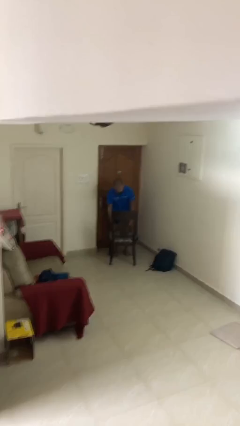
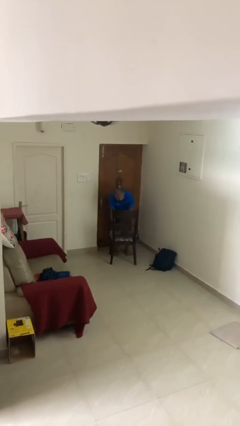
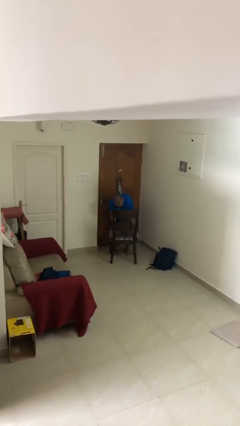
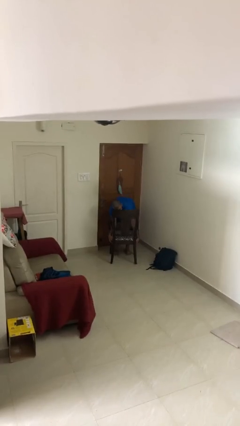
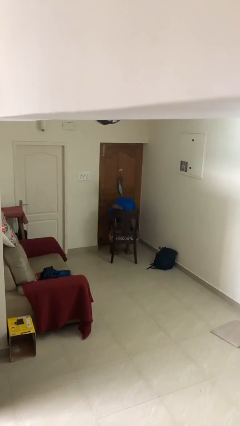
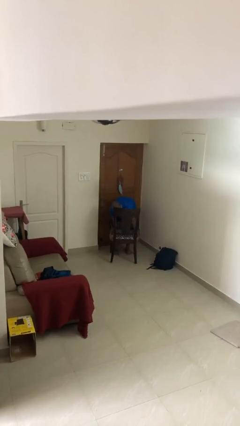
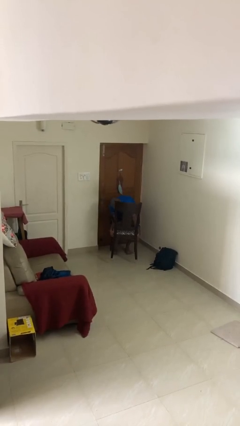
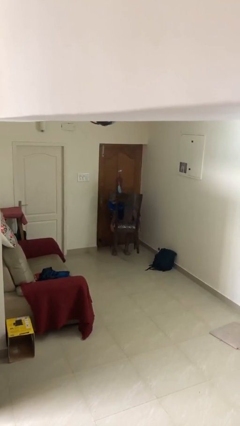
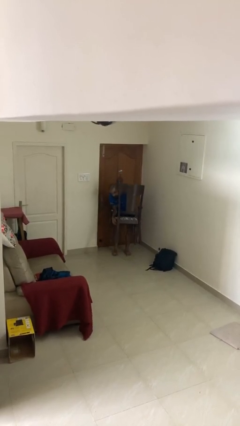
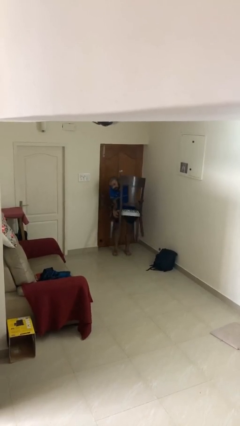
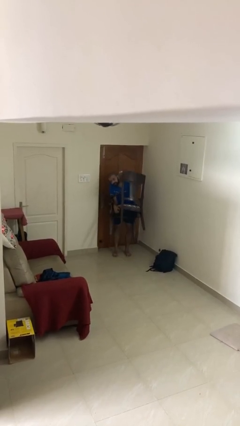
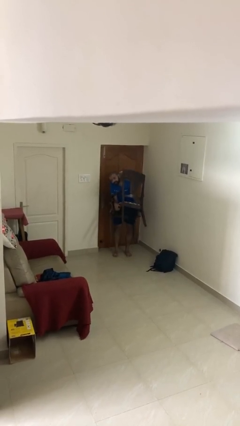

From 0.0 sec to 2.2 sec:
person picks up object from floor

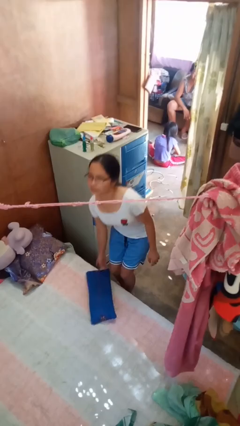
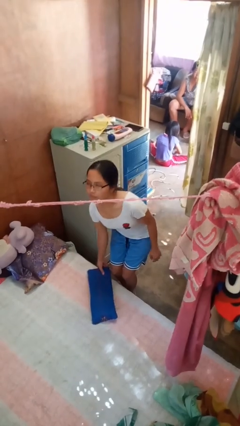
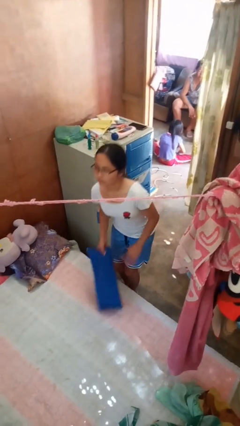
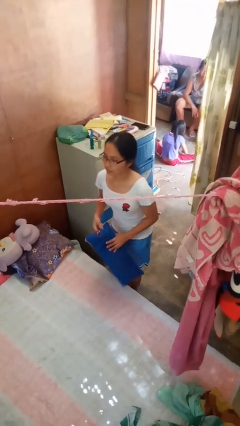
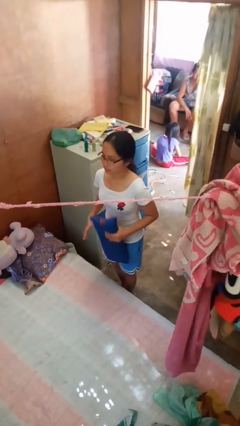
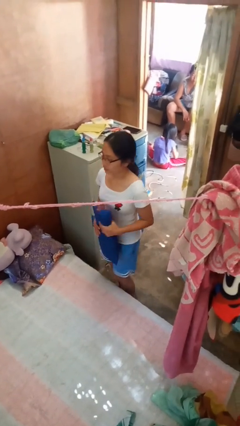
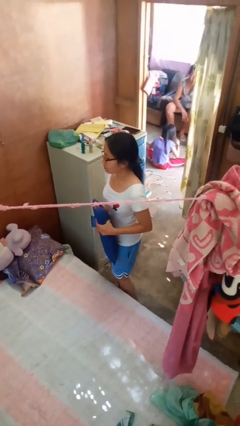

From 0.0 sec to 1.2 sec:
person picks up object from bed

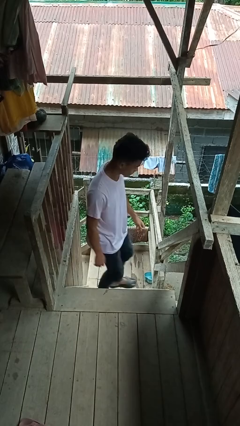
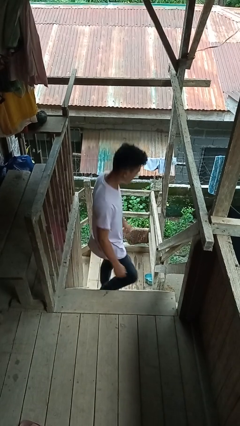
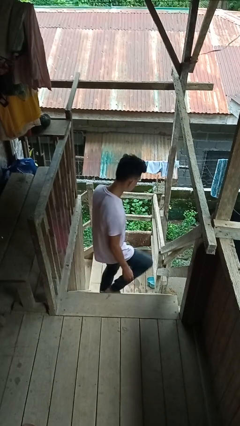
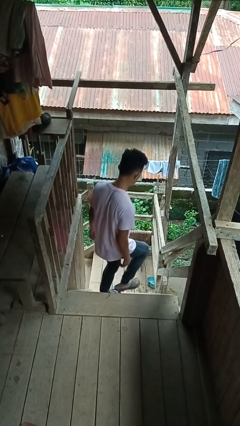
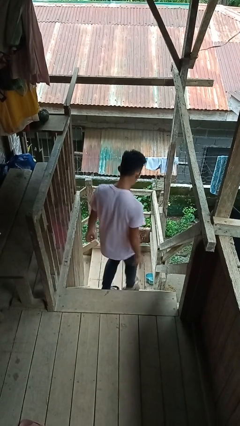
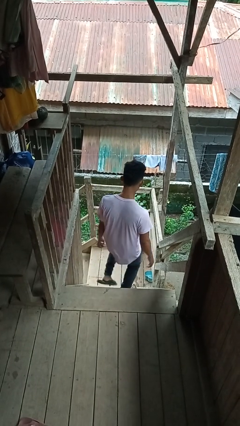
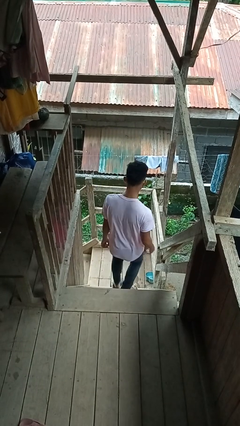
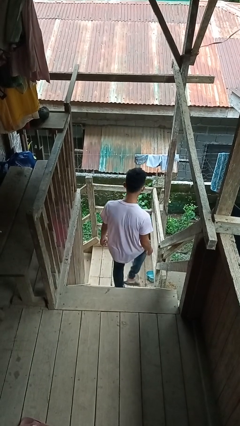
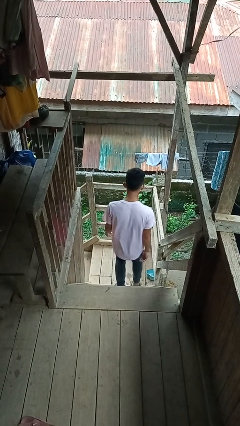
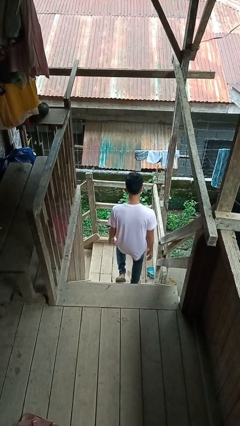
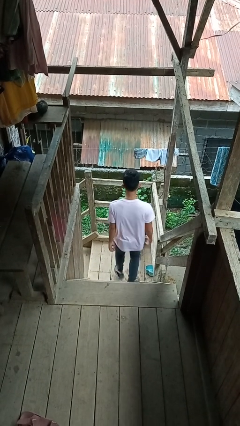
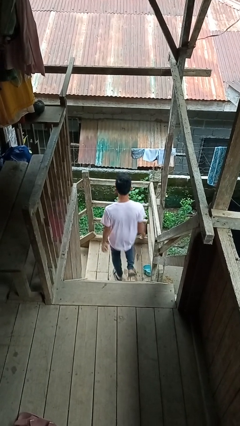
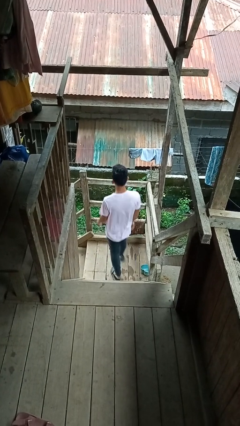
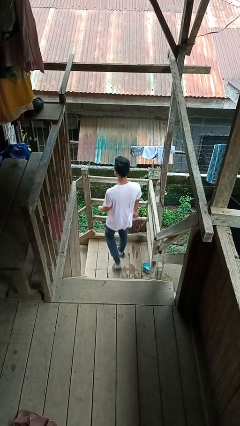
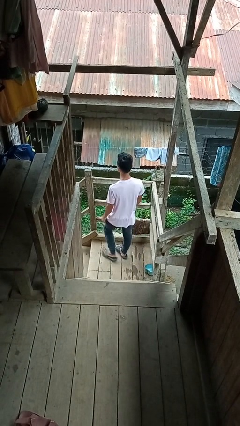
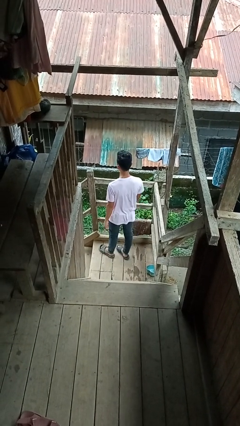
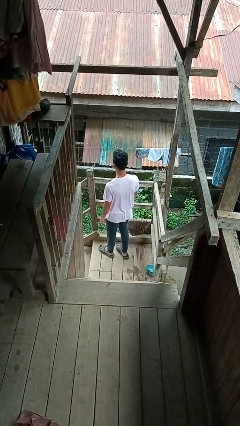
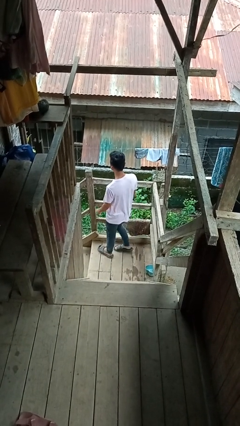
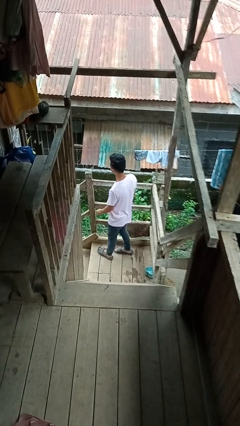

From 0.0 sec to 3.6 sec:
person climbs down stairs

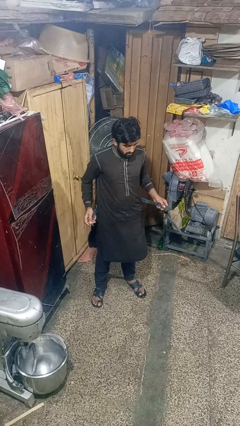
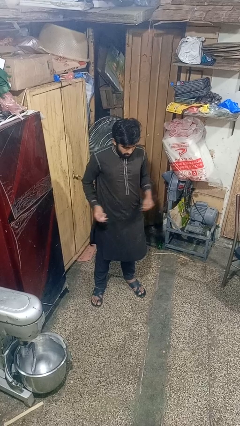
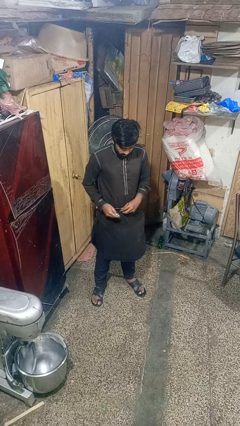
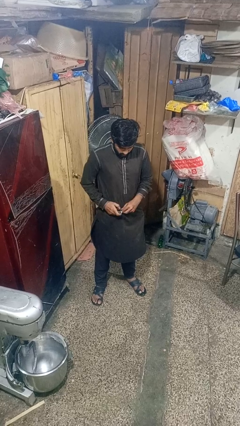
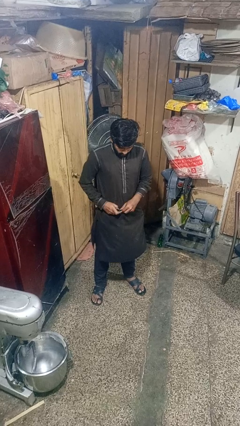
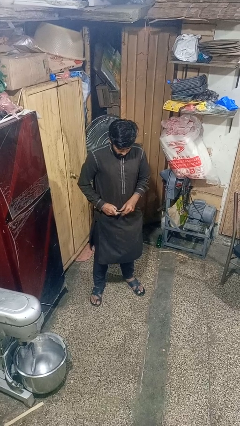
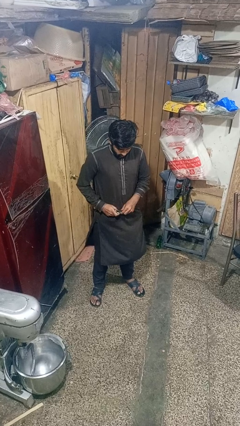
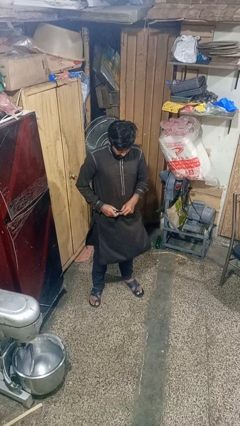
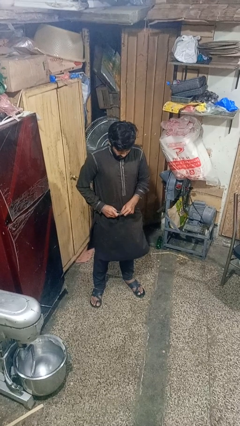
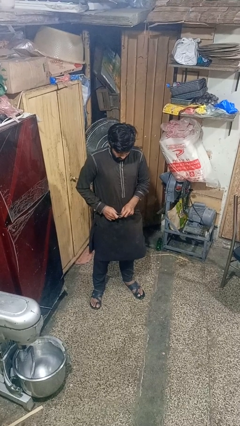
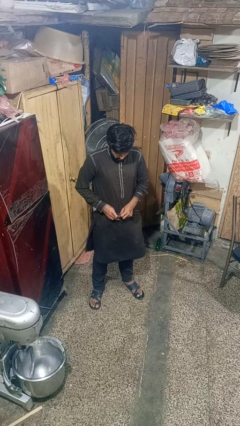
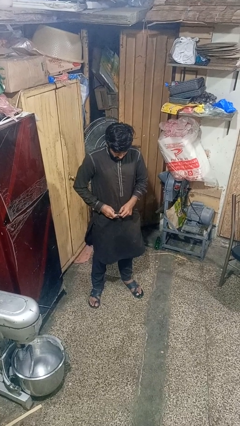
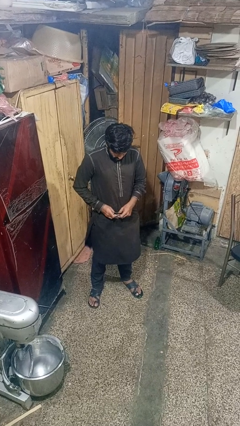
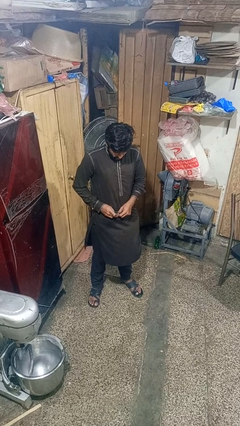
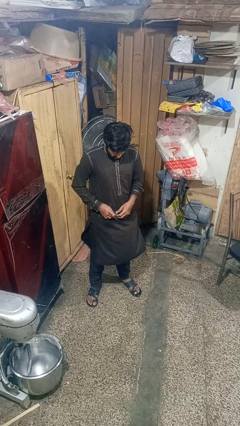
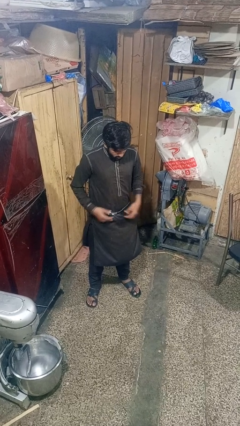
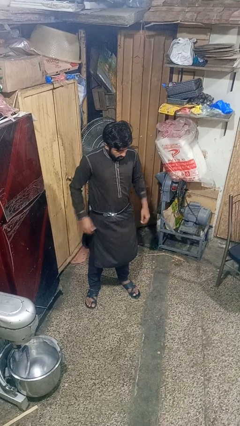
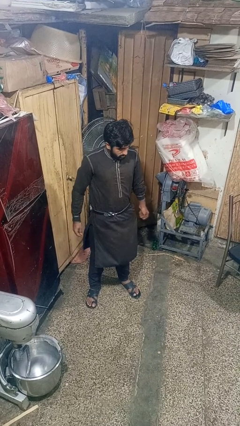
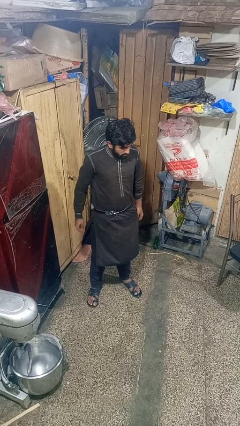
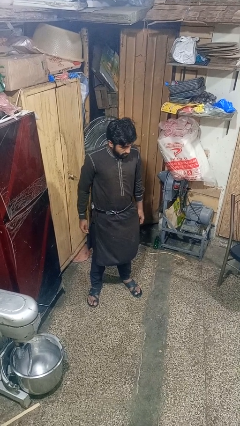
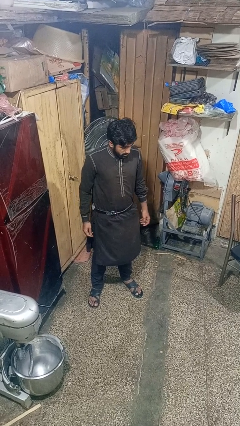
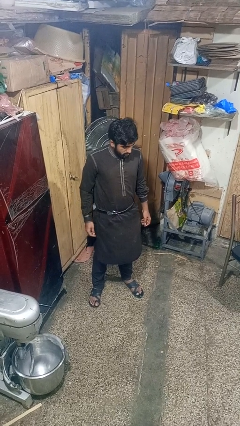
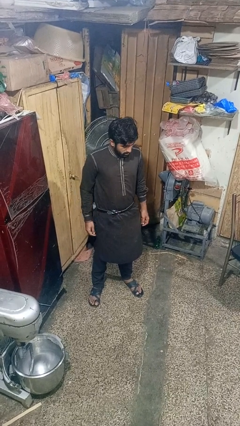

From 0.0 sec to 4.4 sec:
person puts on belt

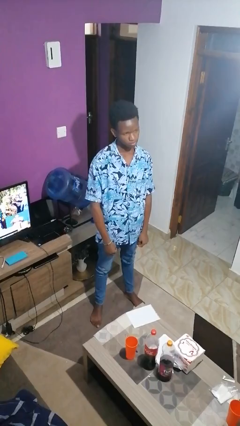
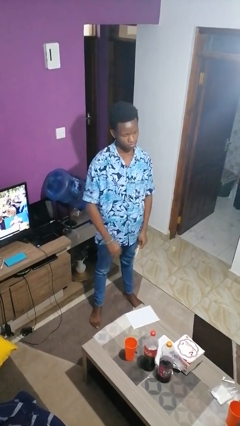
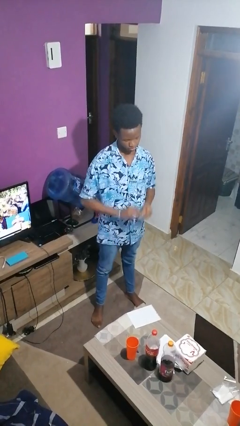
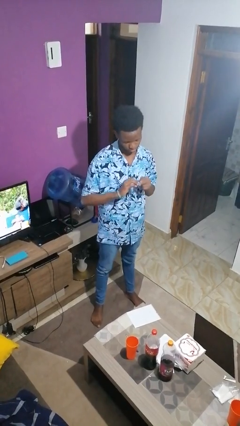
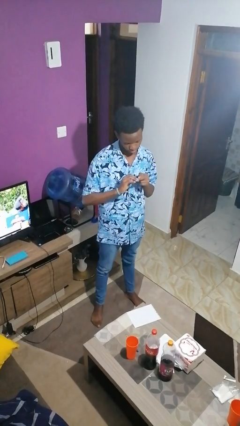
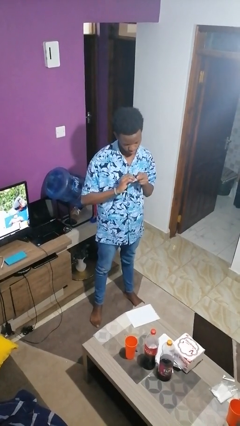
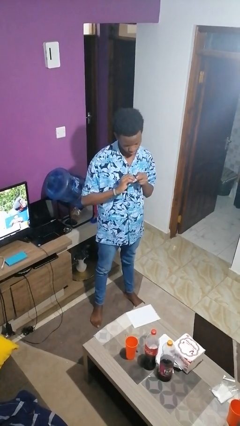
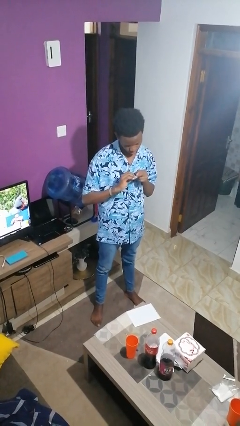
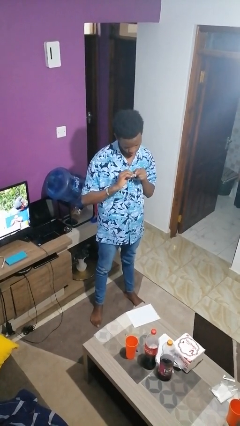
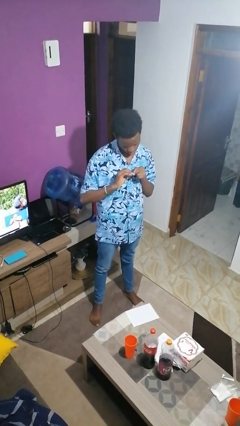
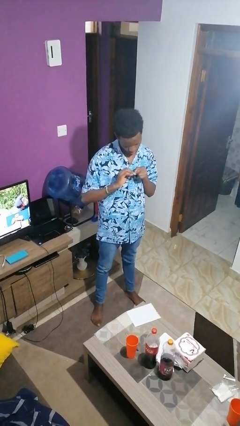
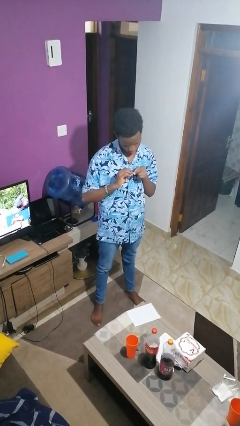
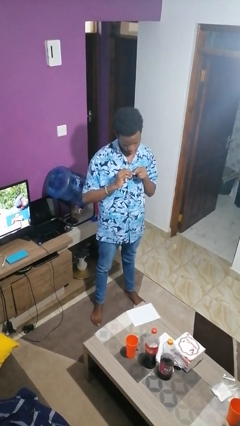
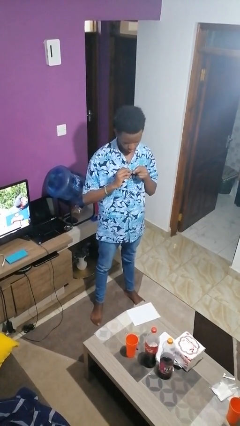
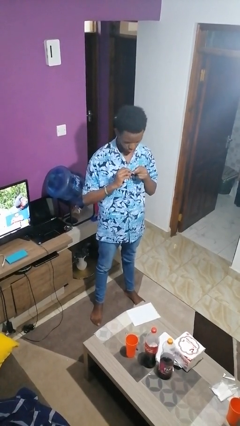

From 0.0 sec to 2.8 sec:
person files fingernails

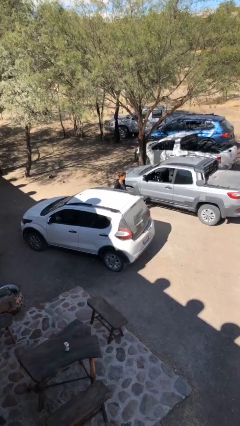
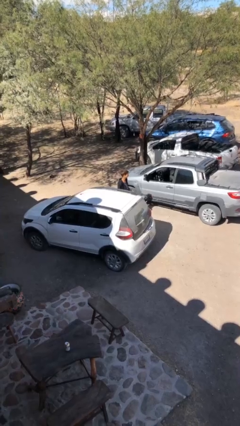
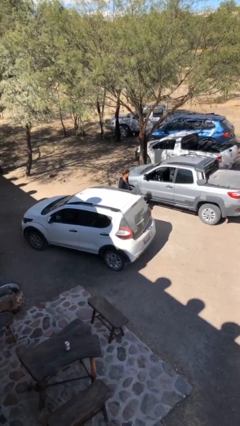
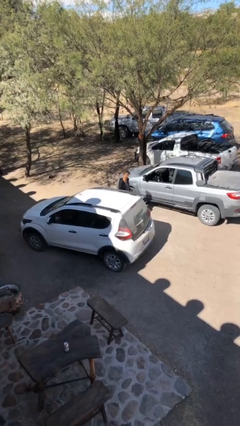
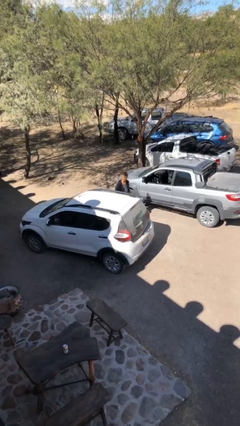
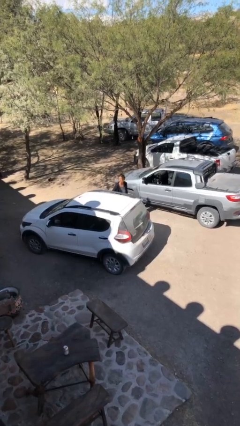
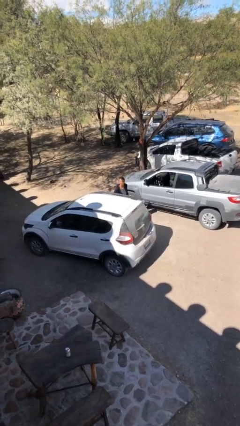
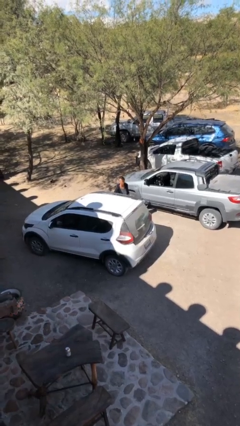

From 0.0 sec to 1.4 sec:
person opens car door

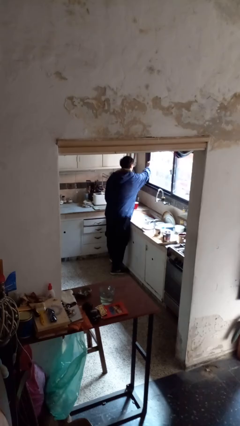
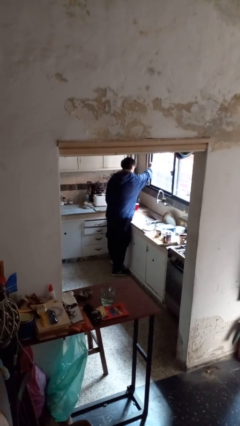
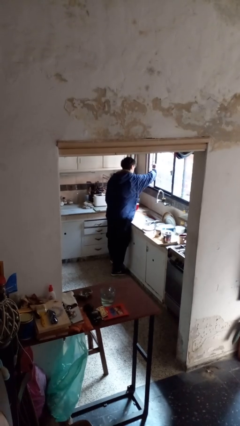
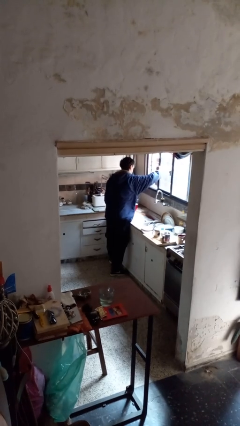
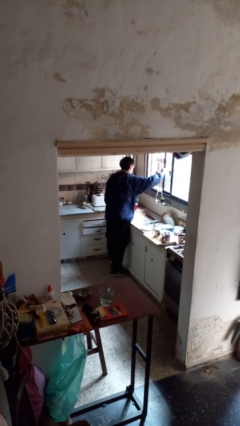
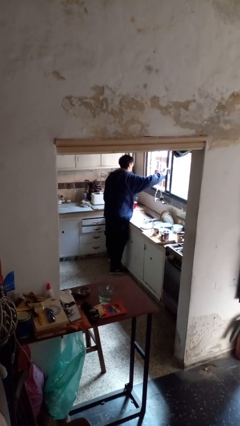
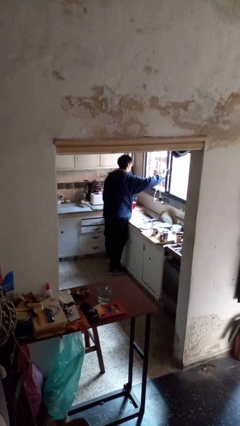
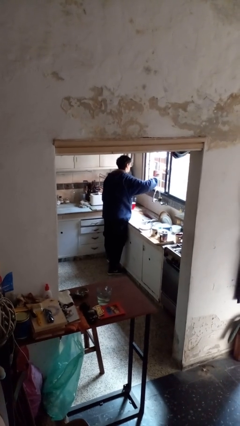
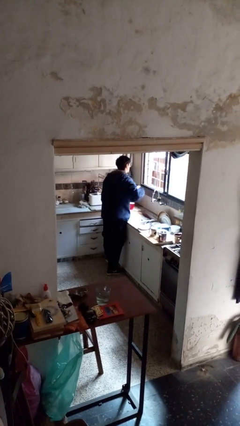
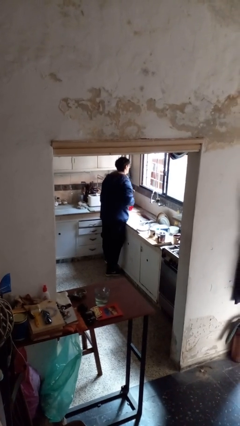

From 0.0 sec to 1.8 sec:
person opens home window
